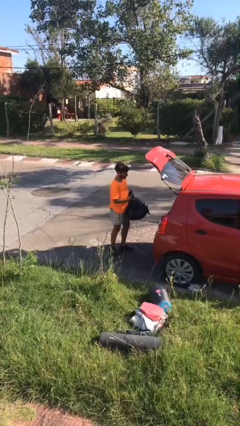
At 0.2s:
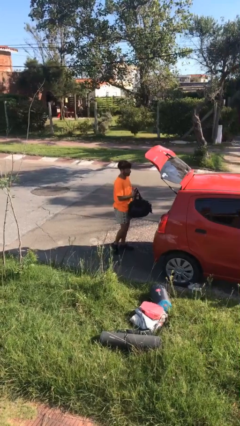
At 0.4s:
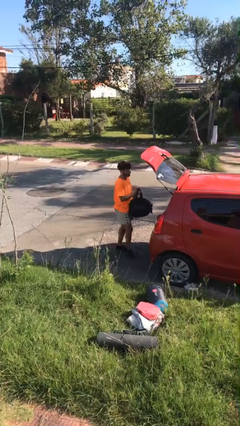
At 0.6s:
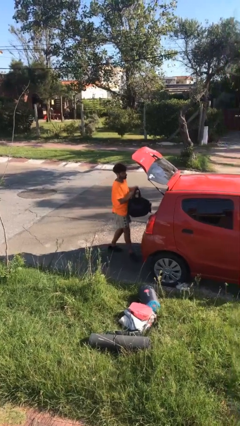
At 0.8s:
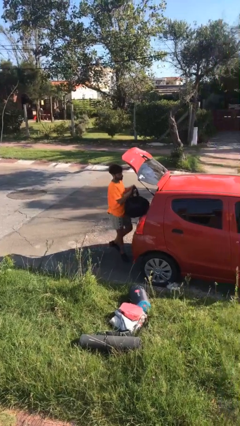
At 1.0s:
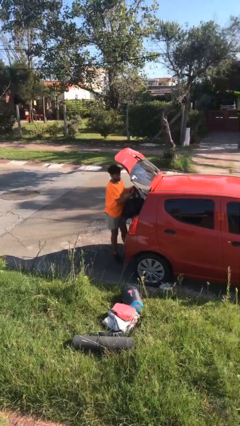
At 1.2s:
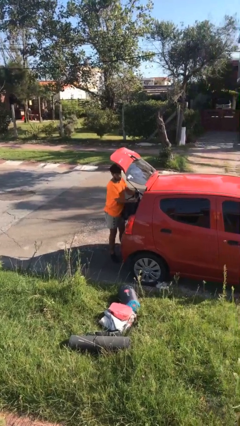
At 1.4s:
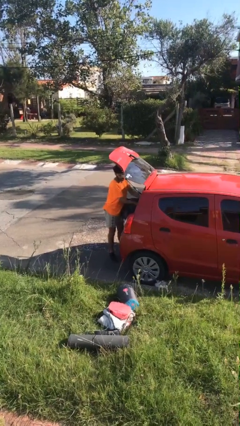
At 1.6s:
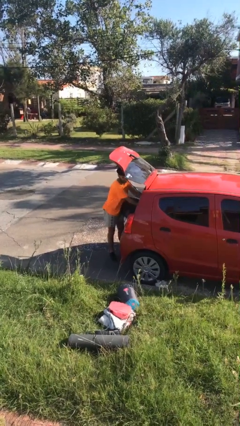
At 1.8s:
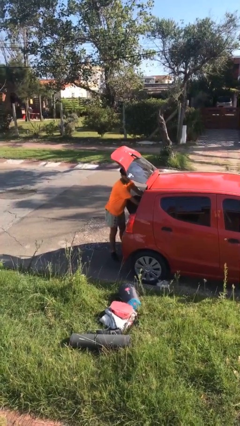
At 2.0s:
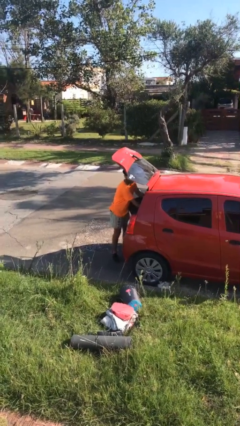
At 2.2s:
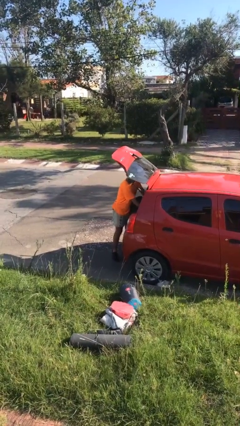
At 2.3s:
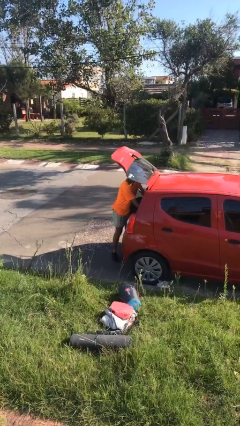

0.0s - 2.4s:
person loads car

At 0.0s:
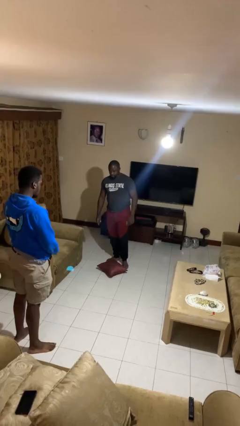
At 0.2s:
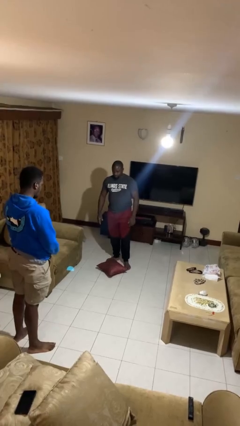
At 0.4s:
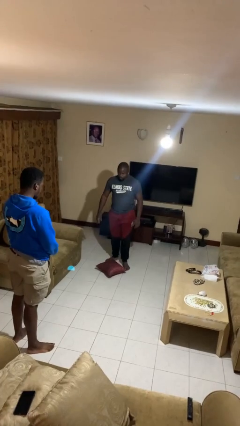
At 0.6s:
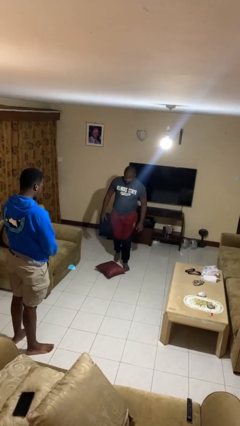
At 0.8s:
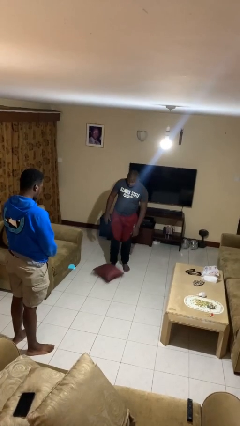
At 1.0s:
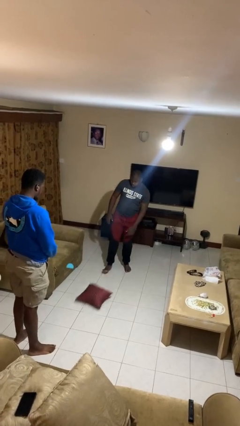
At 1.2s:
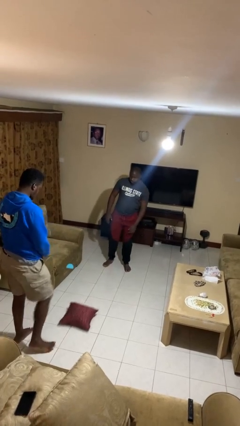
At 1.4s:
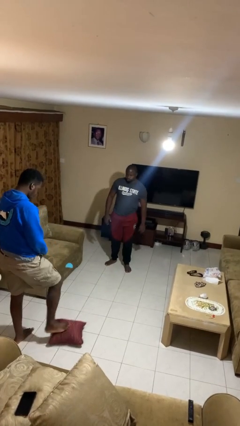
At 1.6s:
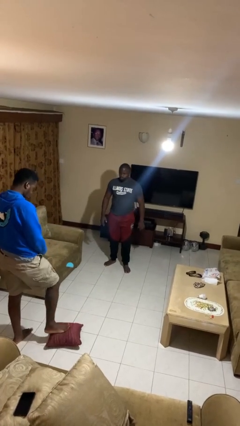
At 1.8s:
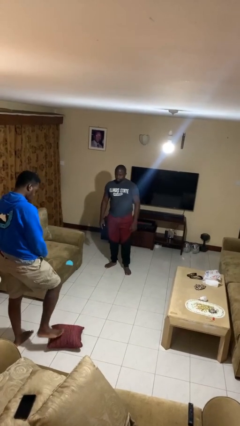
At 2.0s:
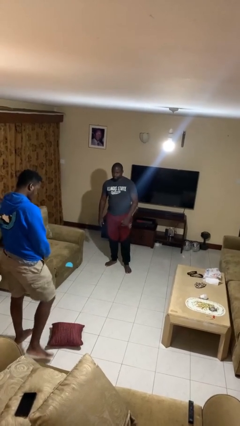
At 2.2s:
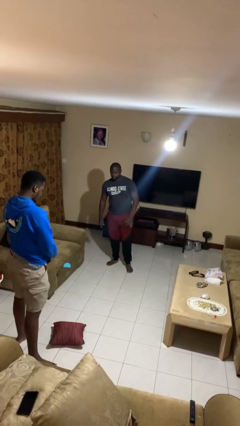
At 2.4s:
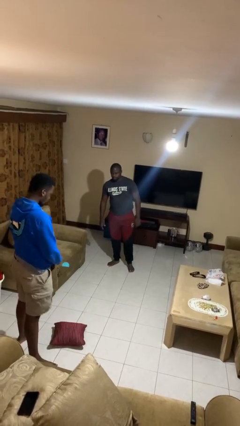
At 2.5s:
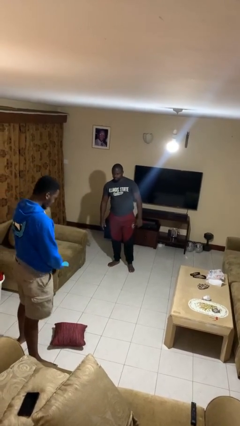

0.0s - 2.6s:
person kicks object to person

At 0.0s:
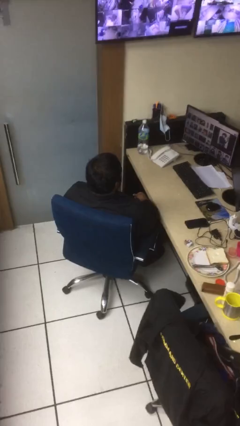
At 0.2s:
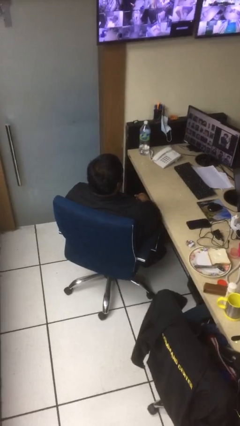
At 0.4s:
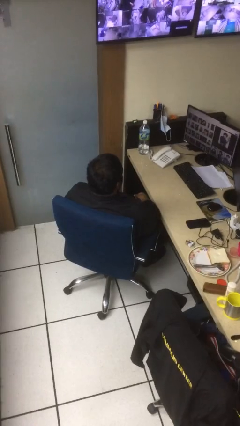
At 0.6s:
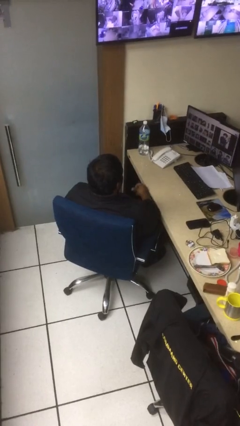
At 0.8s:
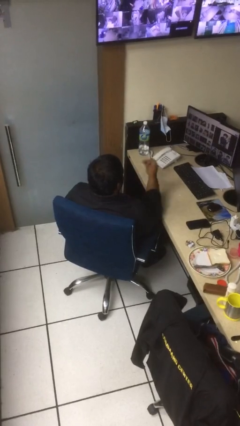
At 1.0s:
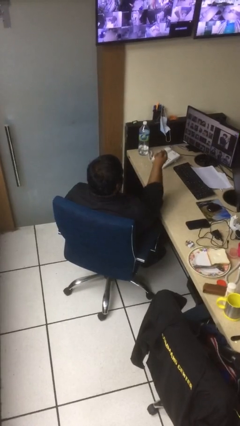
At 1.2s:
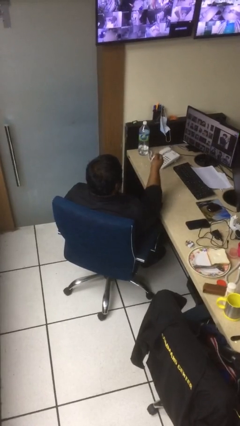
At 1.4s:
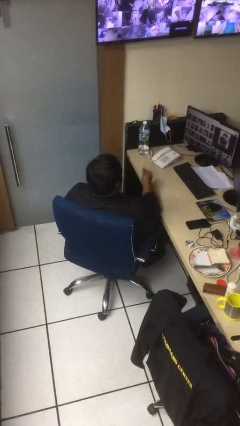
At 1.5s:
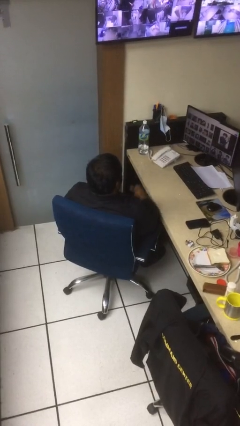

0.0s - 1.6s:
person snaps fingers

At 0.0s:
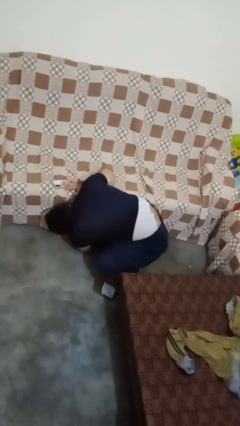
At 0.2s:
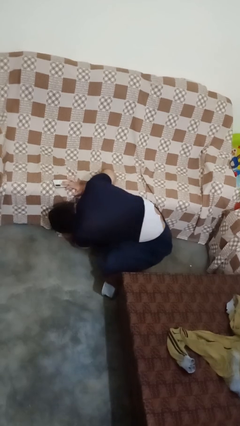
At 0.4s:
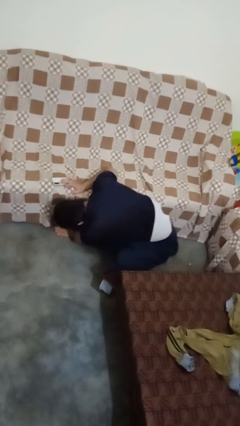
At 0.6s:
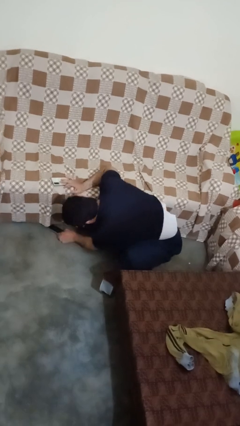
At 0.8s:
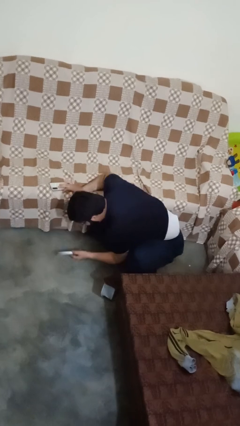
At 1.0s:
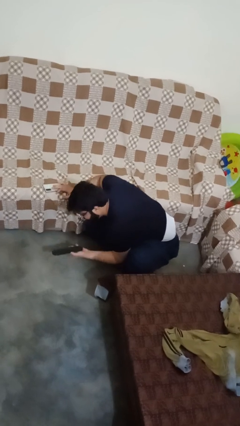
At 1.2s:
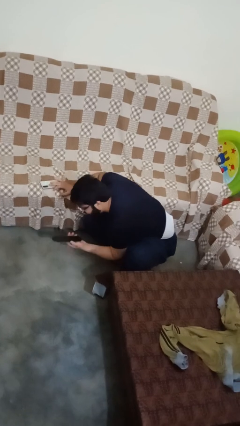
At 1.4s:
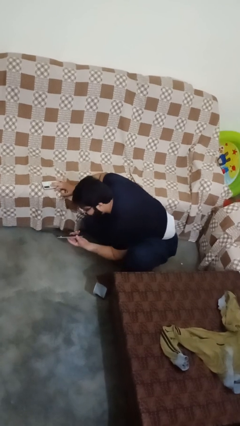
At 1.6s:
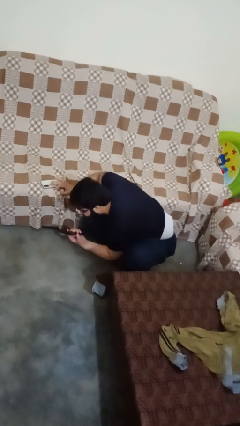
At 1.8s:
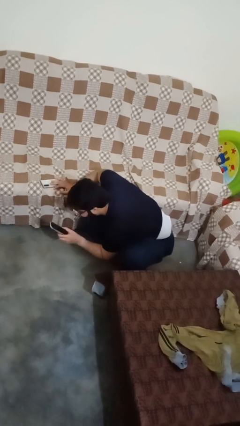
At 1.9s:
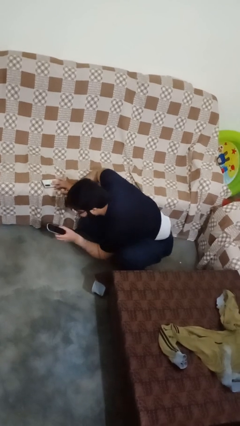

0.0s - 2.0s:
person searches under couch

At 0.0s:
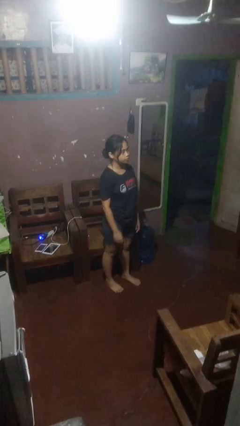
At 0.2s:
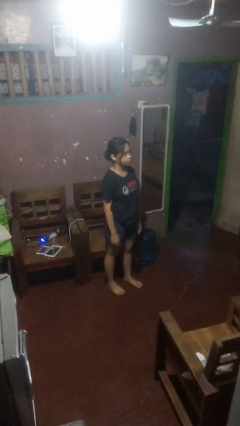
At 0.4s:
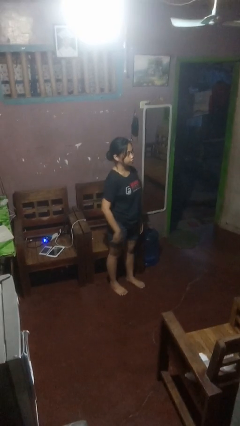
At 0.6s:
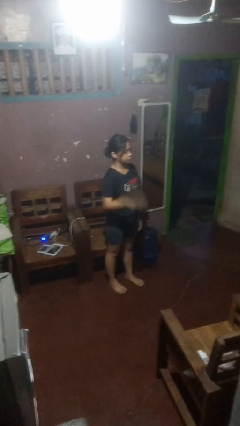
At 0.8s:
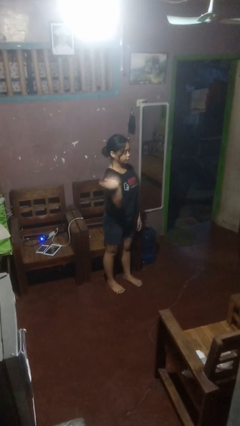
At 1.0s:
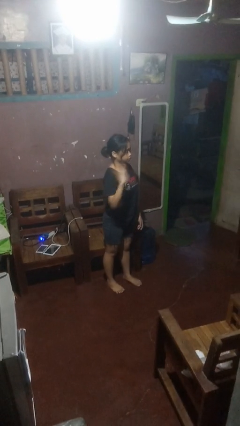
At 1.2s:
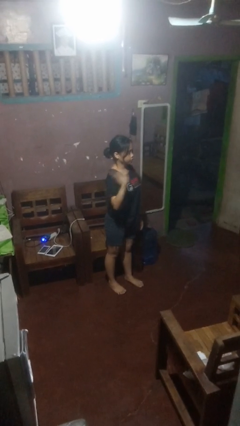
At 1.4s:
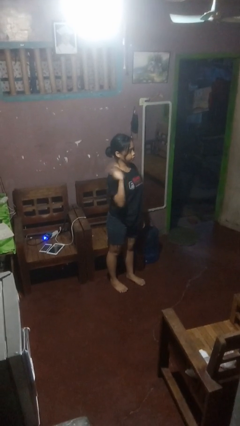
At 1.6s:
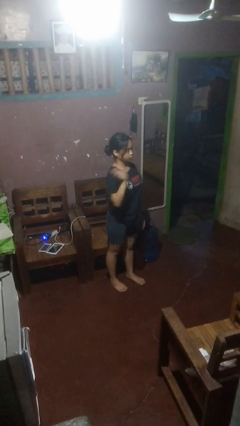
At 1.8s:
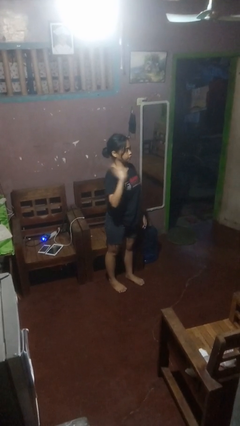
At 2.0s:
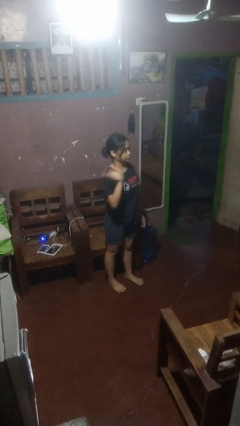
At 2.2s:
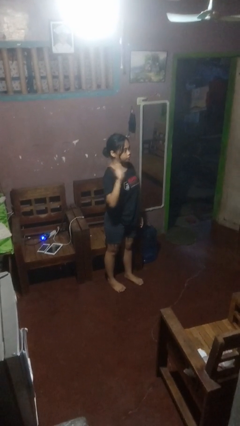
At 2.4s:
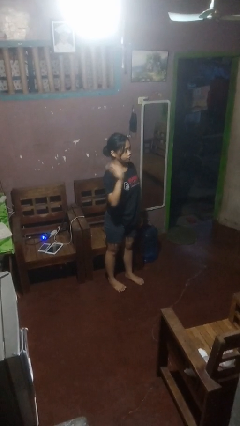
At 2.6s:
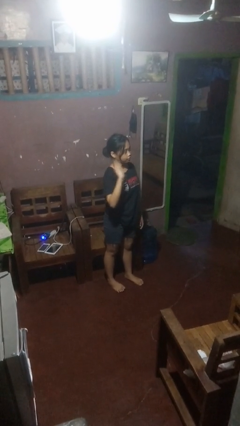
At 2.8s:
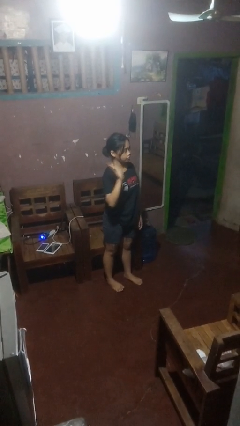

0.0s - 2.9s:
person waves at person

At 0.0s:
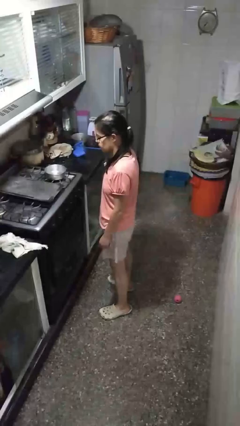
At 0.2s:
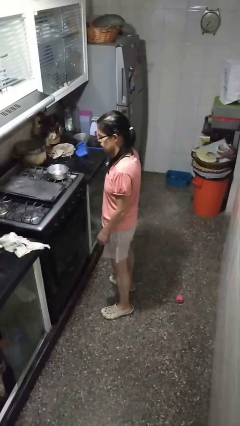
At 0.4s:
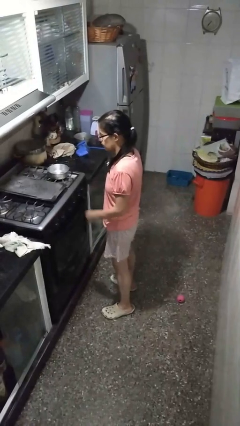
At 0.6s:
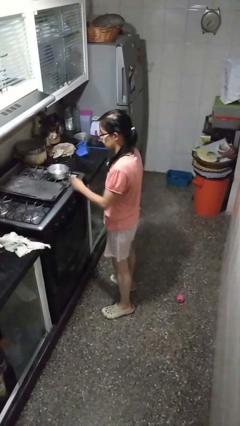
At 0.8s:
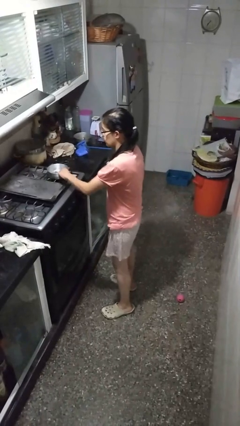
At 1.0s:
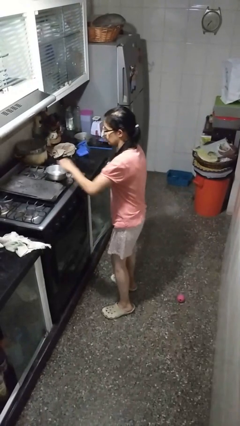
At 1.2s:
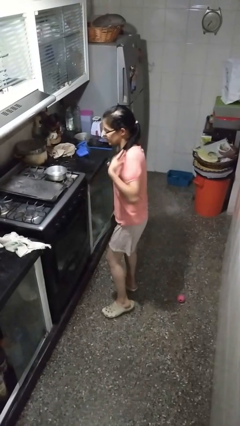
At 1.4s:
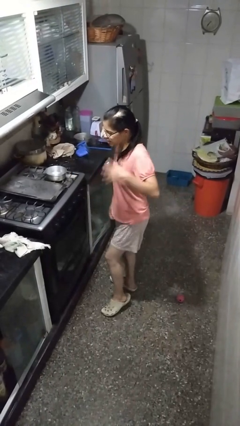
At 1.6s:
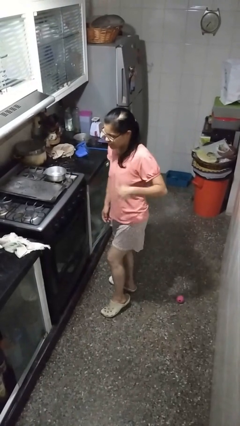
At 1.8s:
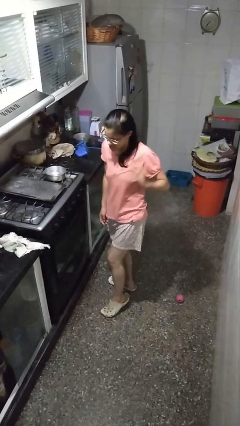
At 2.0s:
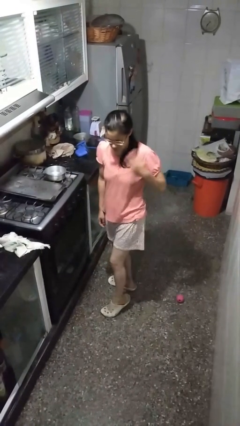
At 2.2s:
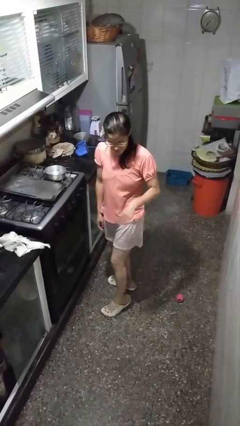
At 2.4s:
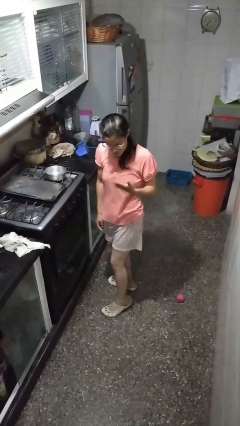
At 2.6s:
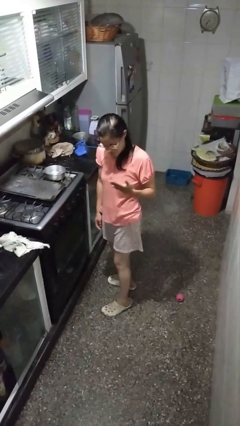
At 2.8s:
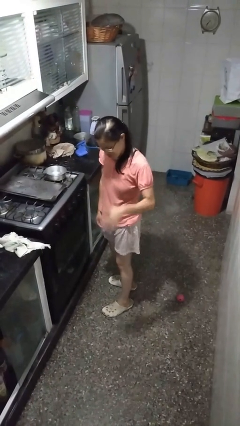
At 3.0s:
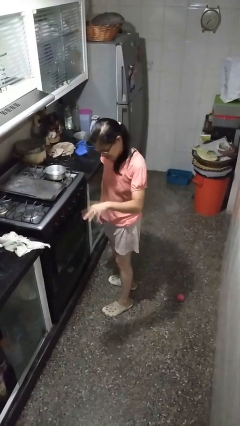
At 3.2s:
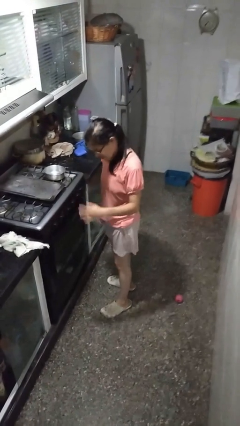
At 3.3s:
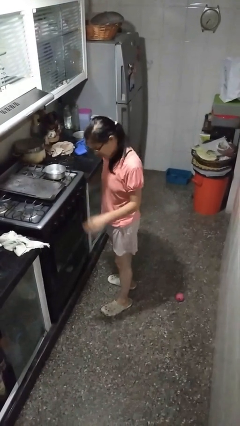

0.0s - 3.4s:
person burns hand

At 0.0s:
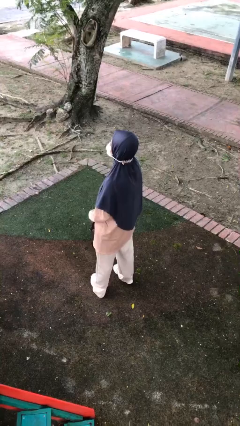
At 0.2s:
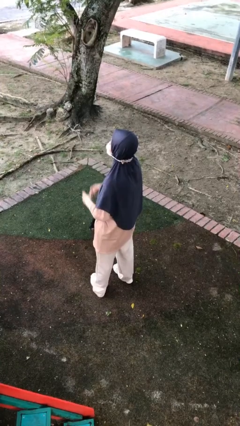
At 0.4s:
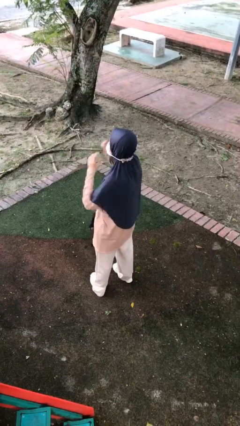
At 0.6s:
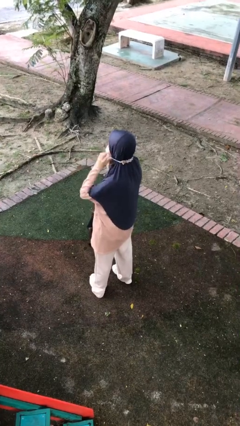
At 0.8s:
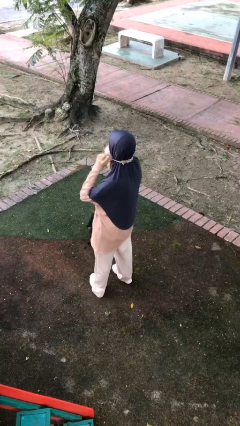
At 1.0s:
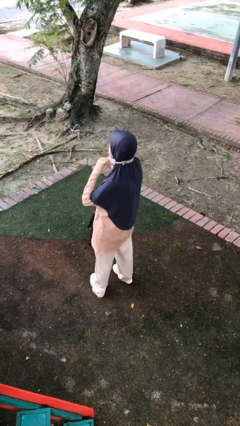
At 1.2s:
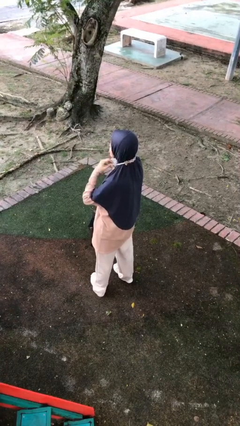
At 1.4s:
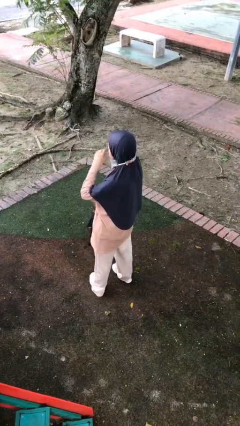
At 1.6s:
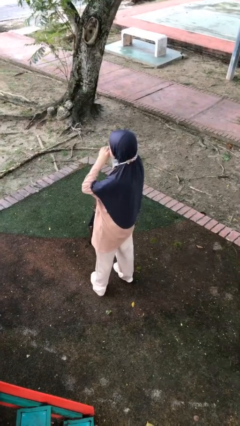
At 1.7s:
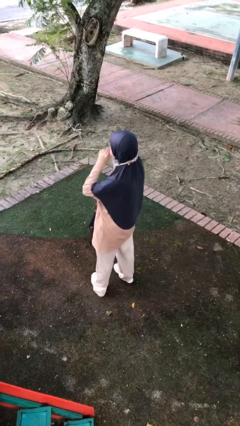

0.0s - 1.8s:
person takes off facemask

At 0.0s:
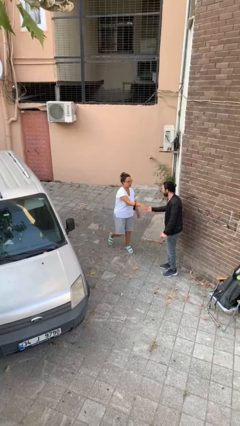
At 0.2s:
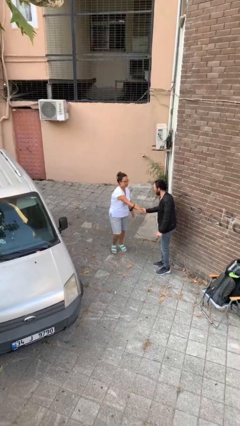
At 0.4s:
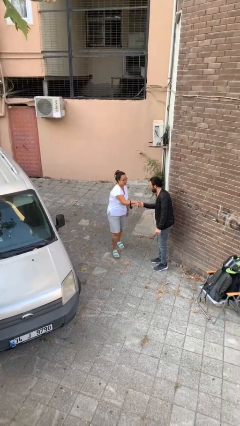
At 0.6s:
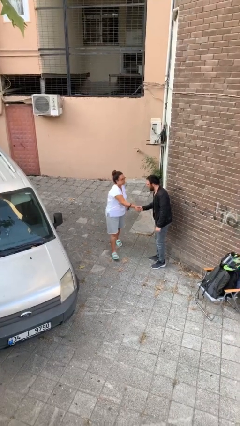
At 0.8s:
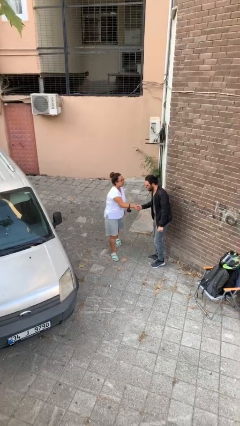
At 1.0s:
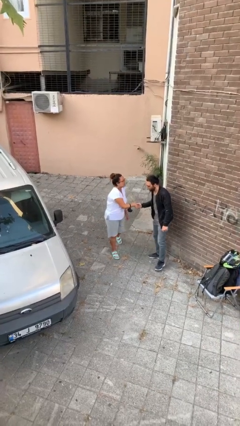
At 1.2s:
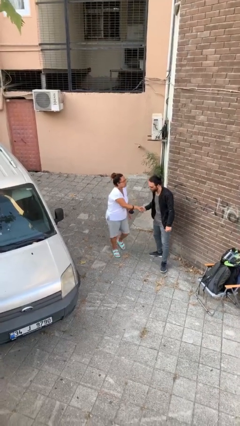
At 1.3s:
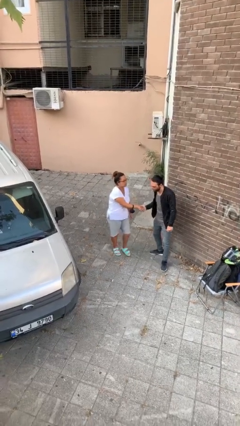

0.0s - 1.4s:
person shakes hand
